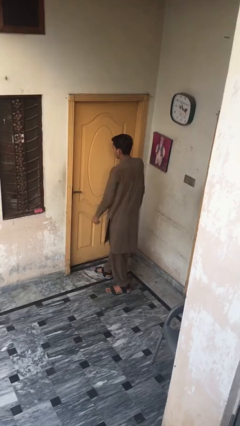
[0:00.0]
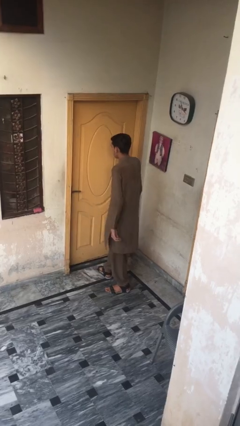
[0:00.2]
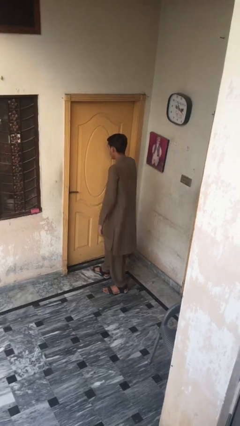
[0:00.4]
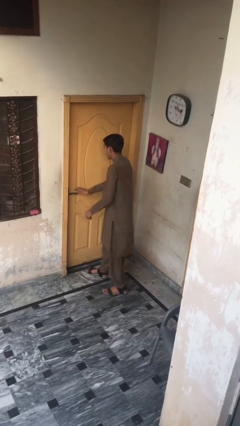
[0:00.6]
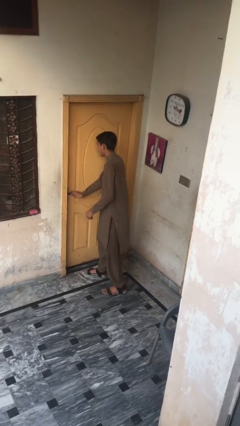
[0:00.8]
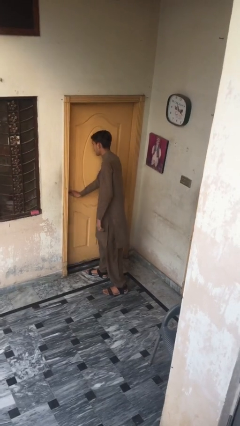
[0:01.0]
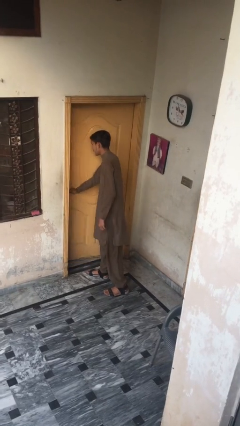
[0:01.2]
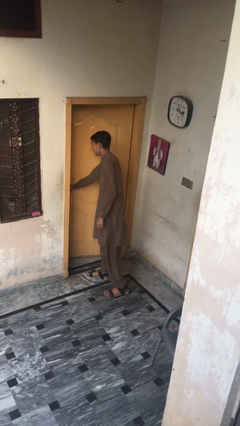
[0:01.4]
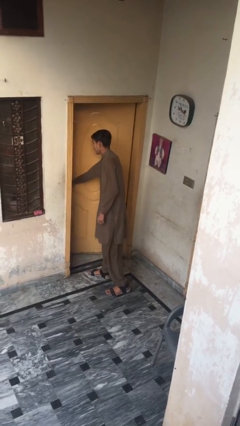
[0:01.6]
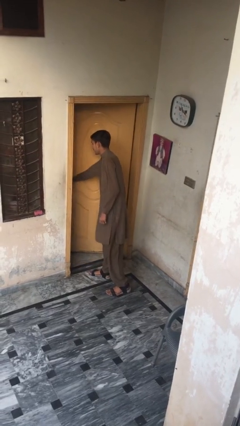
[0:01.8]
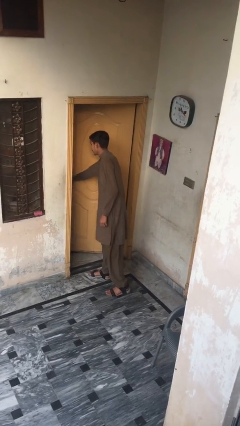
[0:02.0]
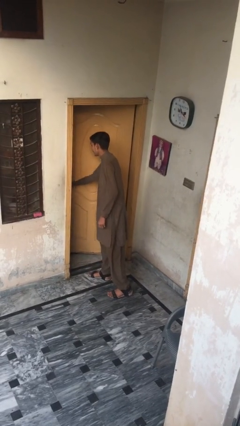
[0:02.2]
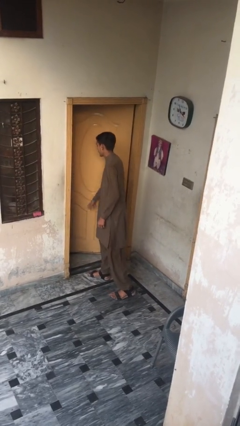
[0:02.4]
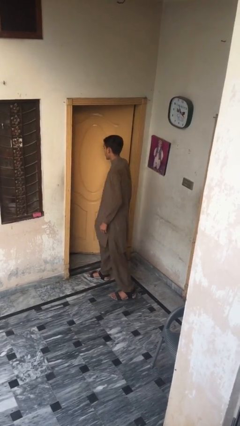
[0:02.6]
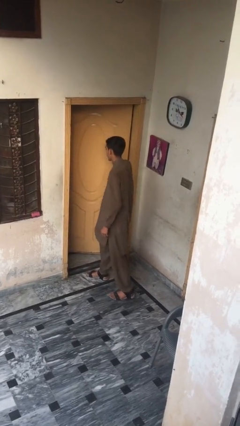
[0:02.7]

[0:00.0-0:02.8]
person opens facility door

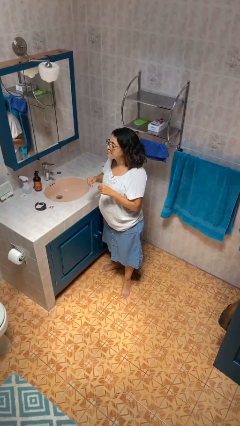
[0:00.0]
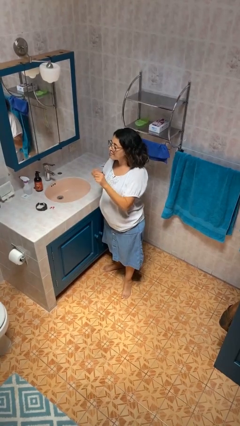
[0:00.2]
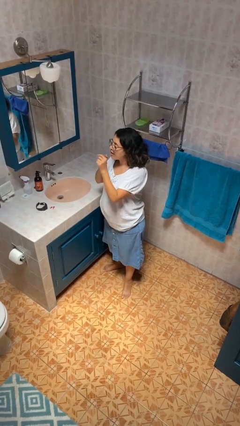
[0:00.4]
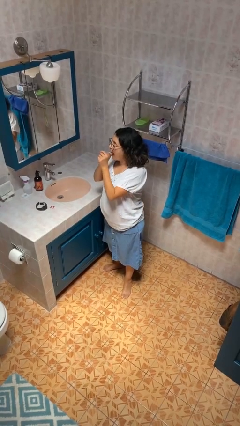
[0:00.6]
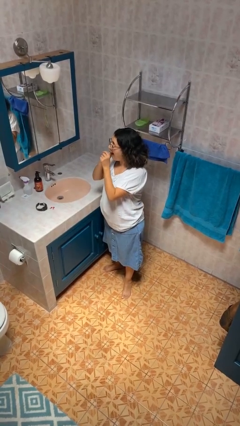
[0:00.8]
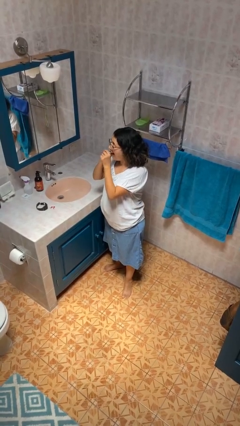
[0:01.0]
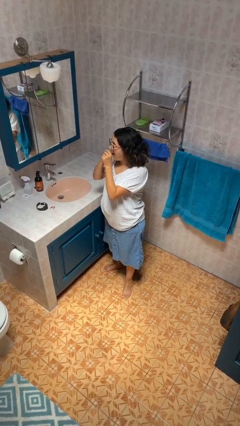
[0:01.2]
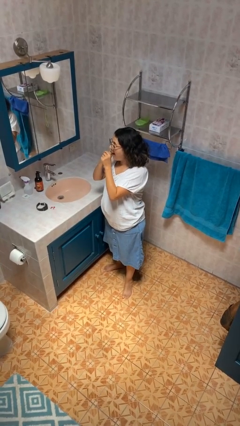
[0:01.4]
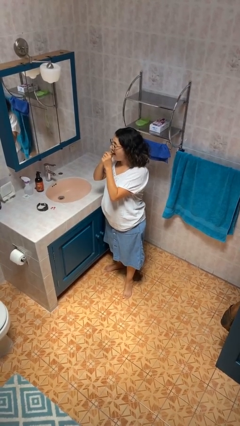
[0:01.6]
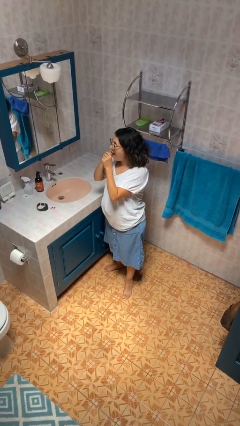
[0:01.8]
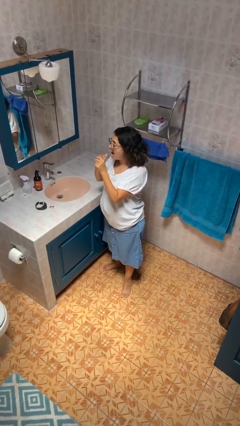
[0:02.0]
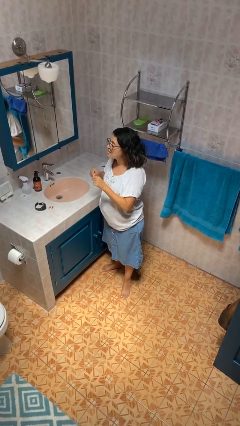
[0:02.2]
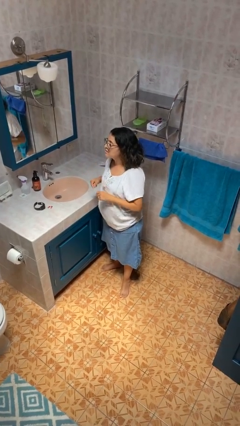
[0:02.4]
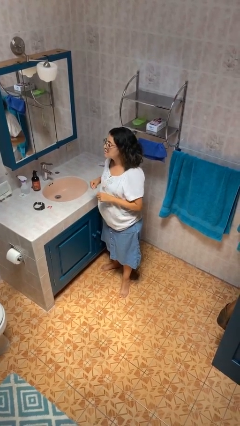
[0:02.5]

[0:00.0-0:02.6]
person flosses

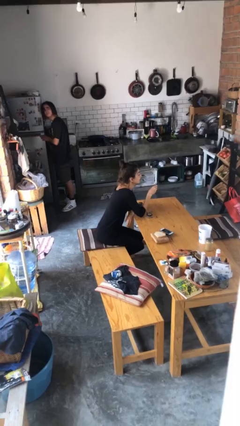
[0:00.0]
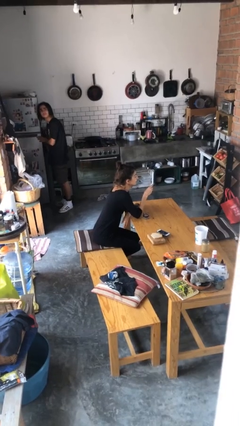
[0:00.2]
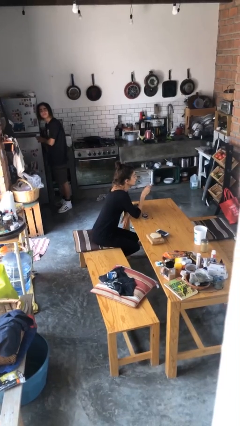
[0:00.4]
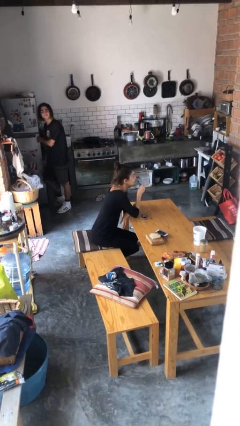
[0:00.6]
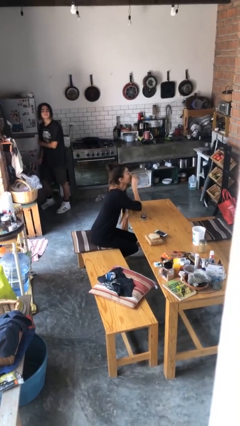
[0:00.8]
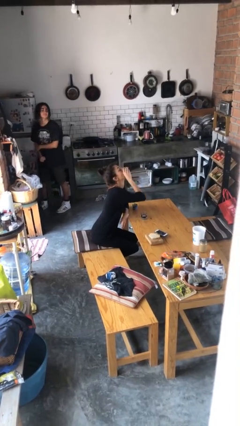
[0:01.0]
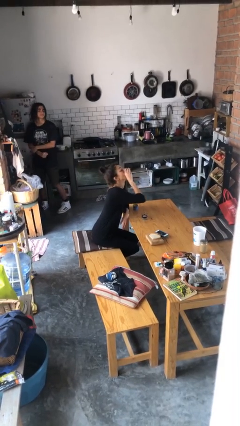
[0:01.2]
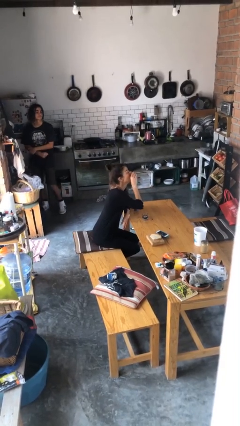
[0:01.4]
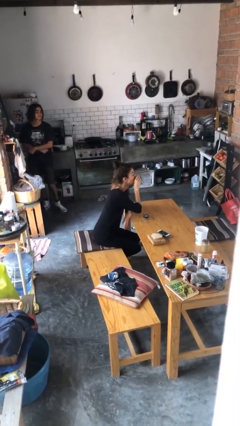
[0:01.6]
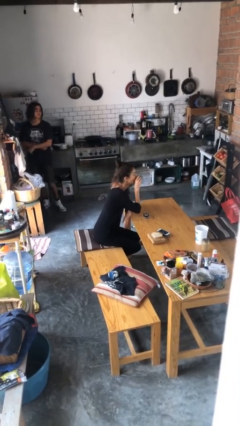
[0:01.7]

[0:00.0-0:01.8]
person drinks from shotglass

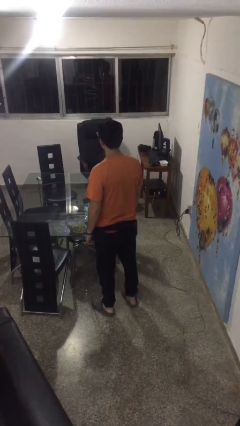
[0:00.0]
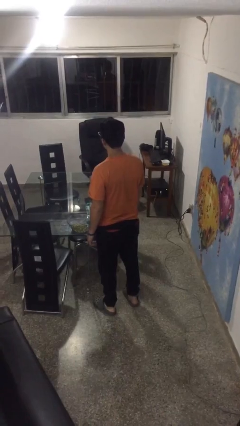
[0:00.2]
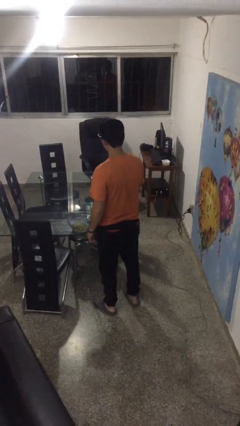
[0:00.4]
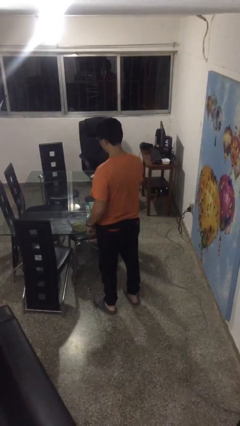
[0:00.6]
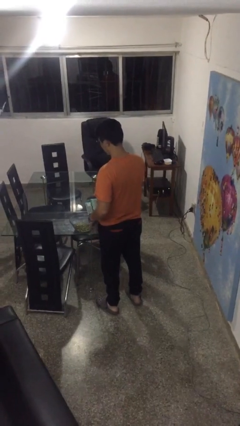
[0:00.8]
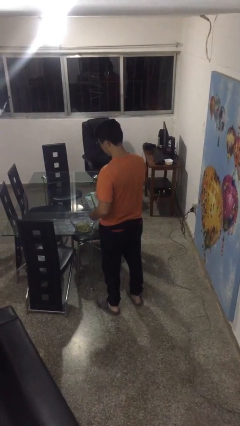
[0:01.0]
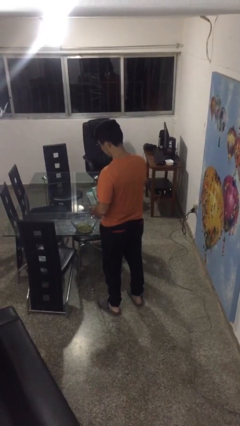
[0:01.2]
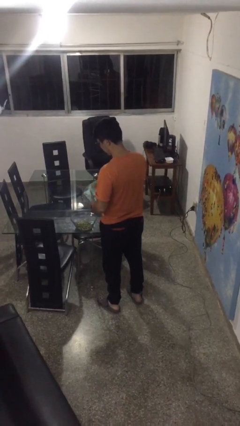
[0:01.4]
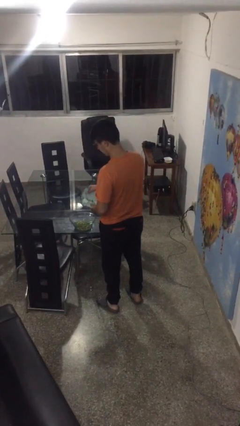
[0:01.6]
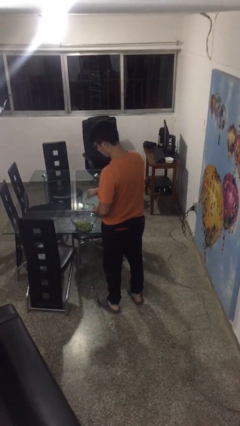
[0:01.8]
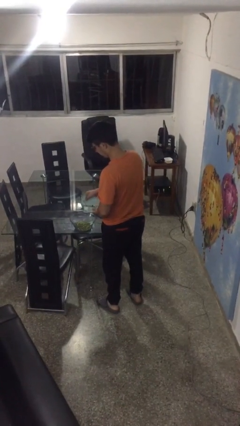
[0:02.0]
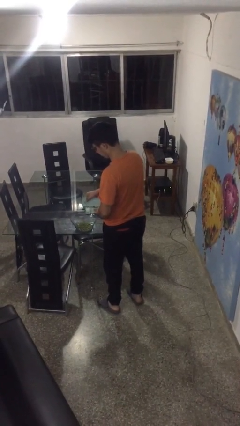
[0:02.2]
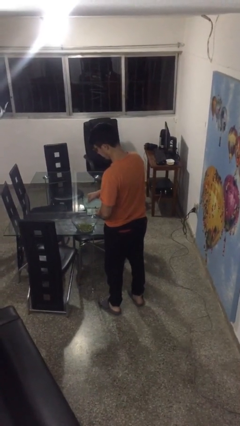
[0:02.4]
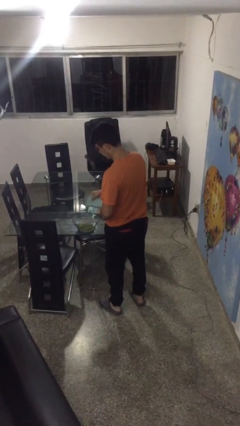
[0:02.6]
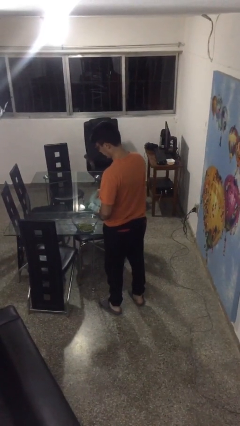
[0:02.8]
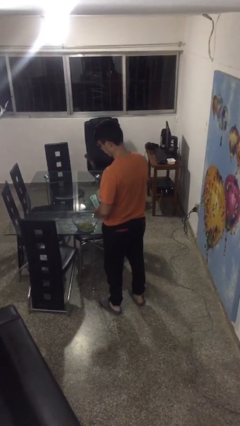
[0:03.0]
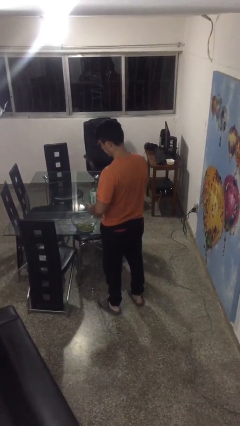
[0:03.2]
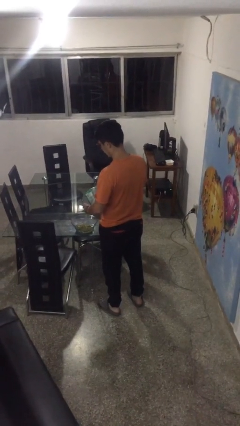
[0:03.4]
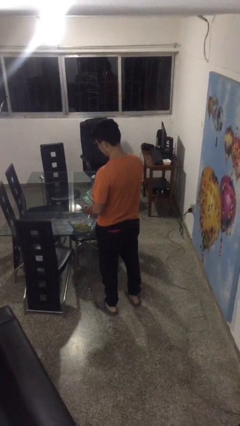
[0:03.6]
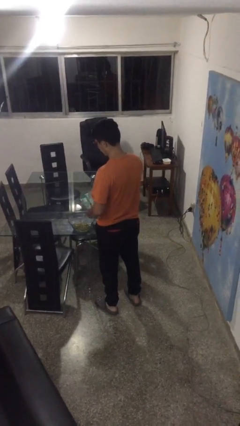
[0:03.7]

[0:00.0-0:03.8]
person pours into bowl

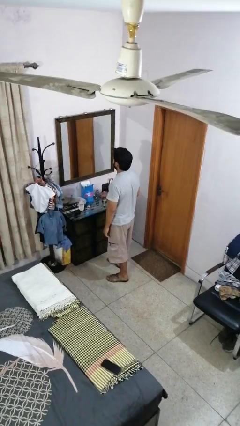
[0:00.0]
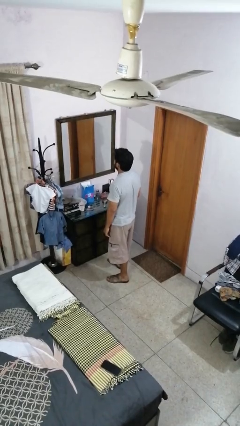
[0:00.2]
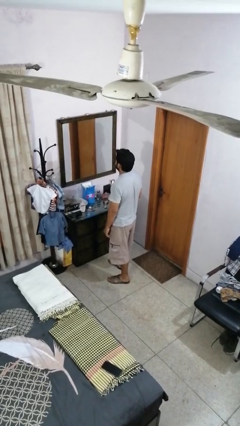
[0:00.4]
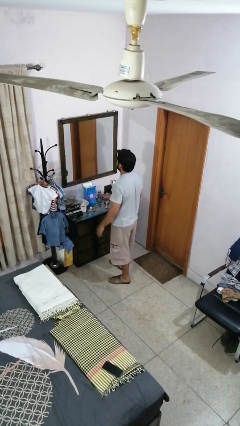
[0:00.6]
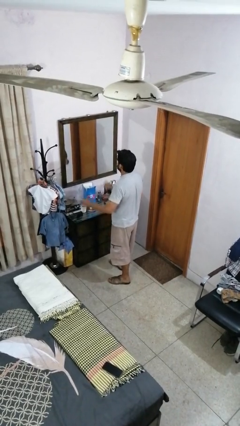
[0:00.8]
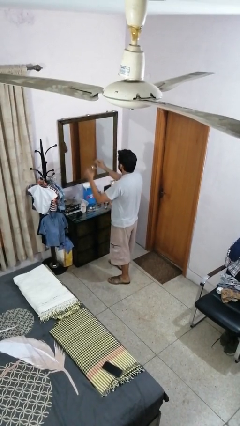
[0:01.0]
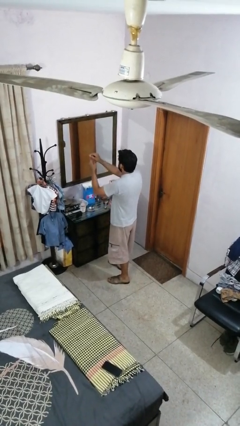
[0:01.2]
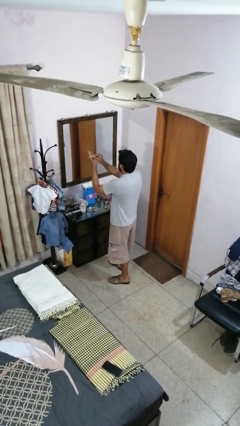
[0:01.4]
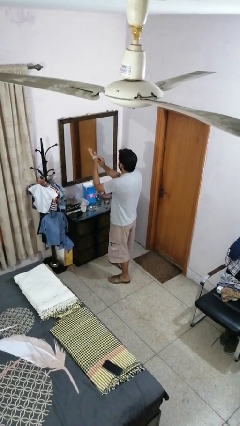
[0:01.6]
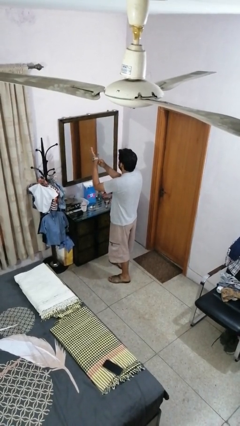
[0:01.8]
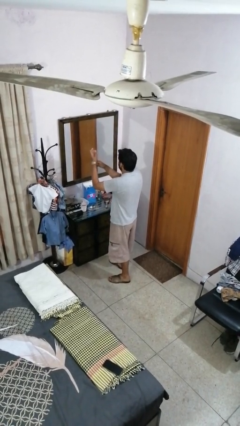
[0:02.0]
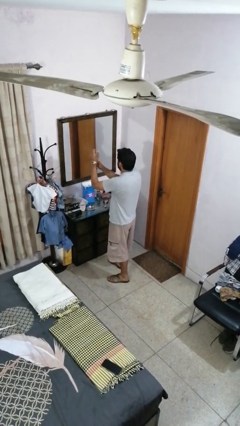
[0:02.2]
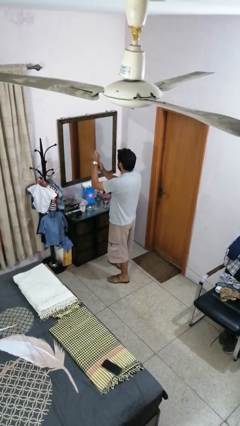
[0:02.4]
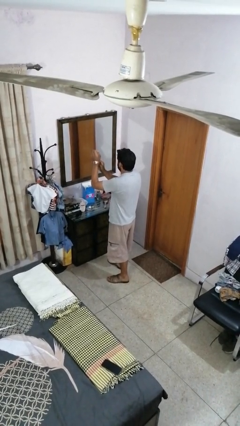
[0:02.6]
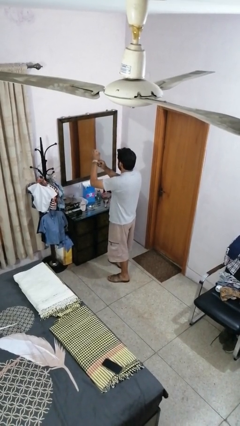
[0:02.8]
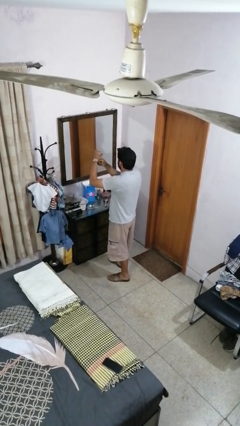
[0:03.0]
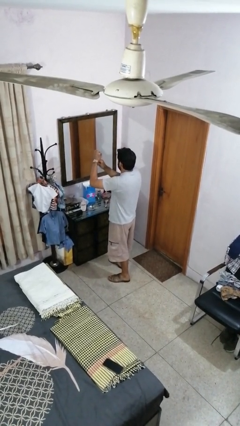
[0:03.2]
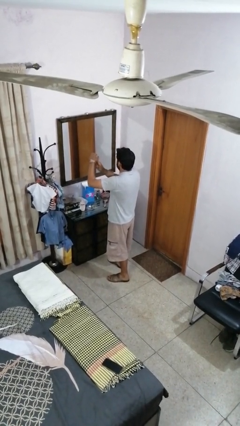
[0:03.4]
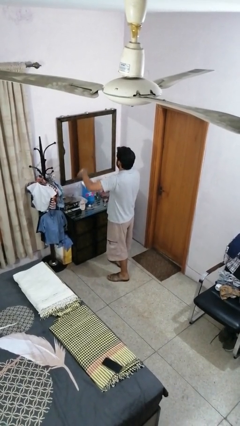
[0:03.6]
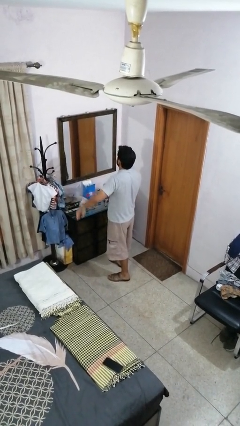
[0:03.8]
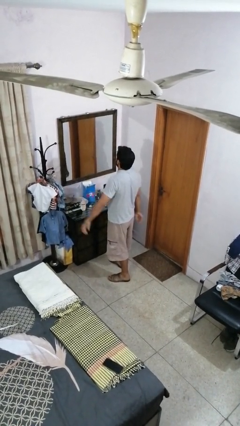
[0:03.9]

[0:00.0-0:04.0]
person puts on wristwatch

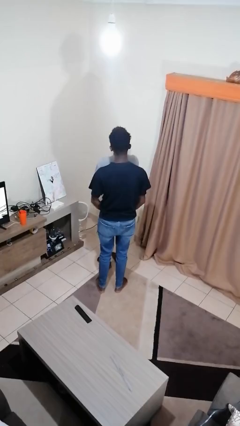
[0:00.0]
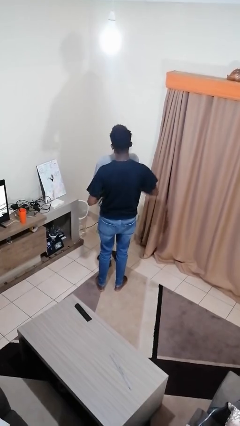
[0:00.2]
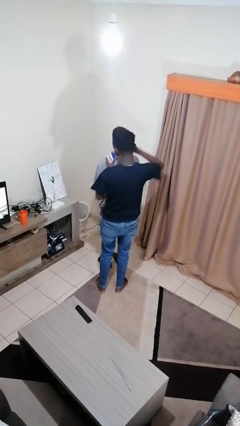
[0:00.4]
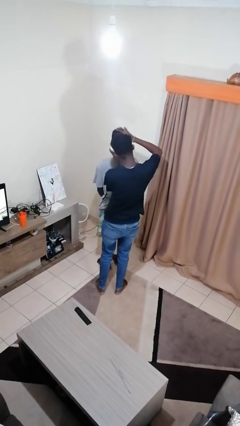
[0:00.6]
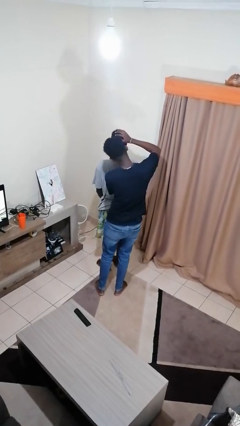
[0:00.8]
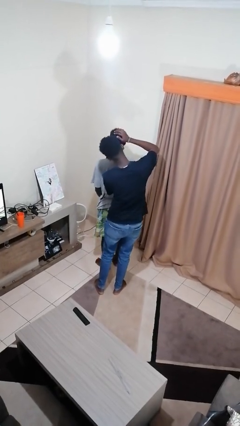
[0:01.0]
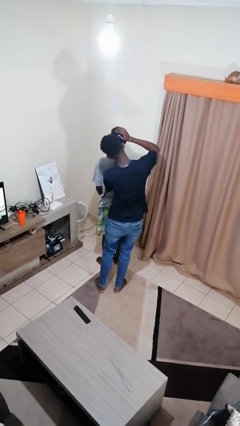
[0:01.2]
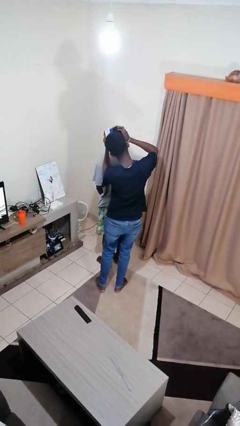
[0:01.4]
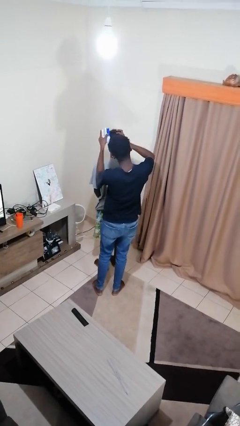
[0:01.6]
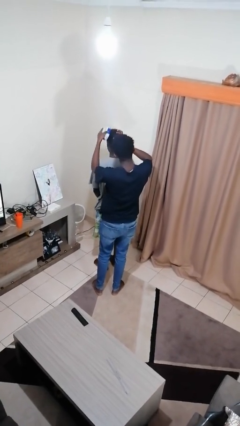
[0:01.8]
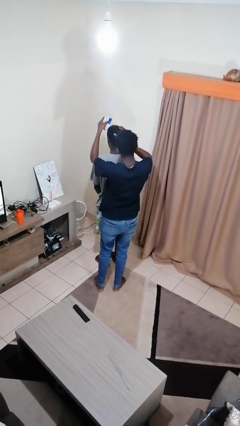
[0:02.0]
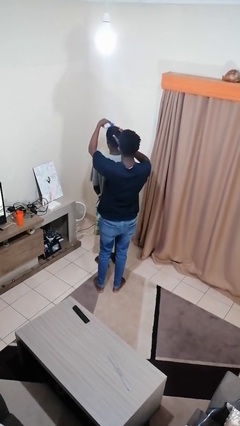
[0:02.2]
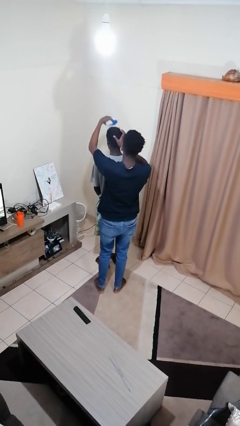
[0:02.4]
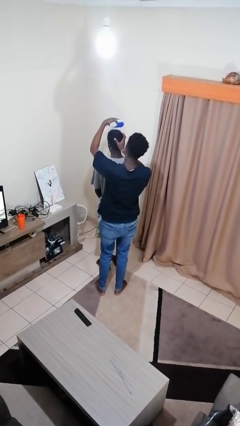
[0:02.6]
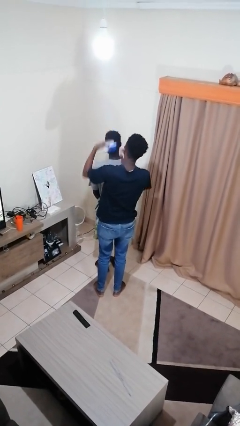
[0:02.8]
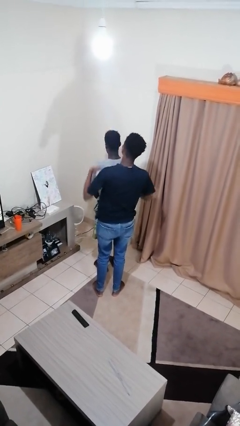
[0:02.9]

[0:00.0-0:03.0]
person brushes hair of person
